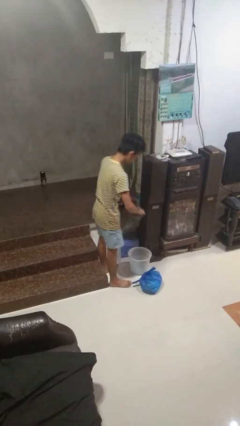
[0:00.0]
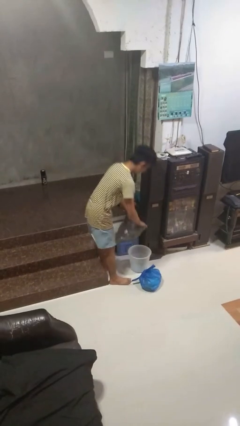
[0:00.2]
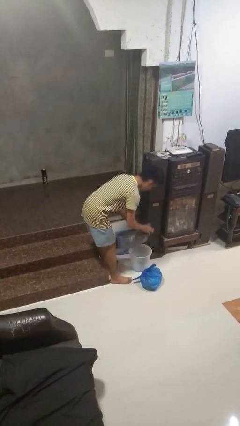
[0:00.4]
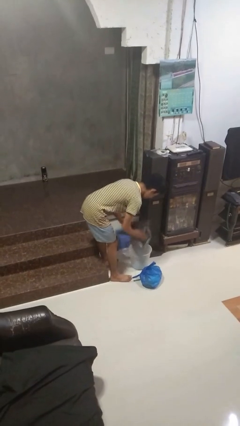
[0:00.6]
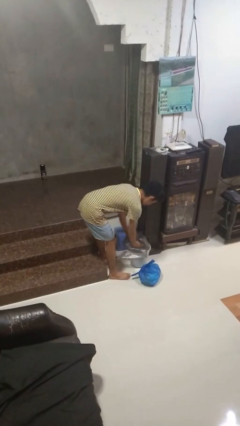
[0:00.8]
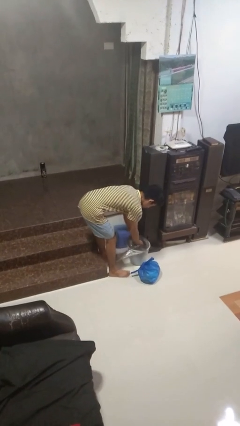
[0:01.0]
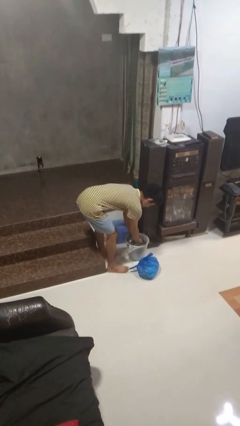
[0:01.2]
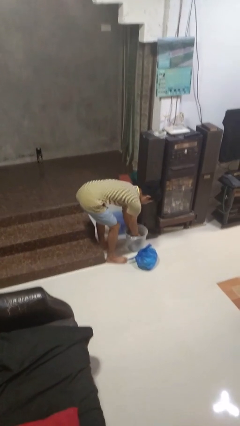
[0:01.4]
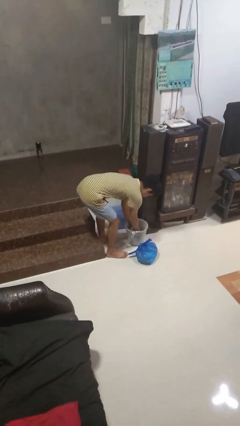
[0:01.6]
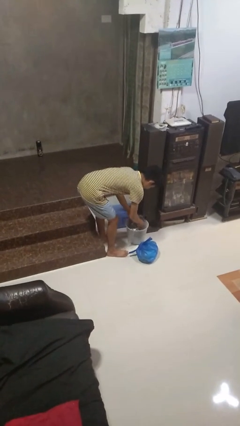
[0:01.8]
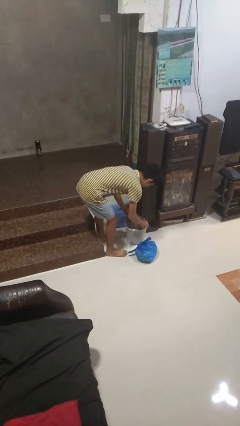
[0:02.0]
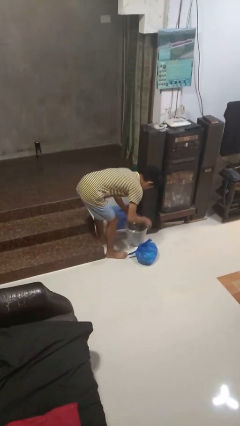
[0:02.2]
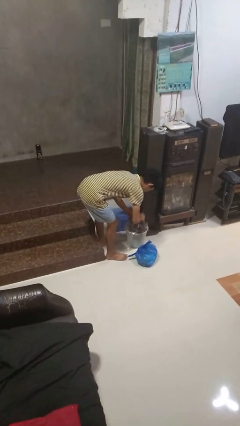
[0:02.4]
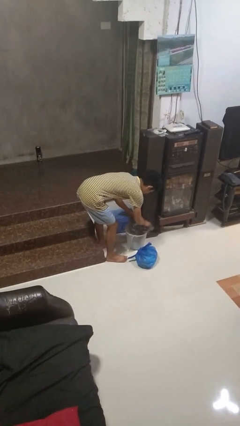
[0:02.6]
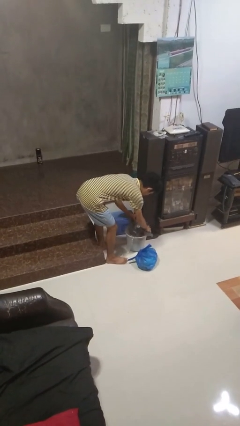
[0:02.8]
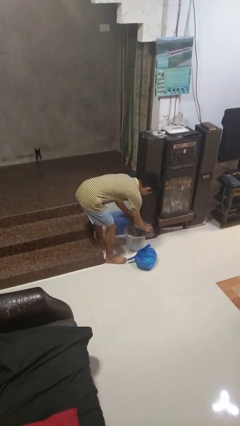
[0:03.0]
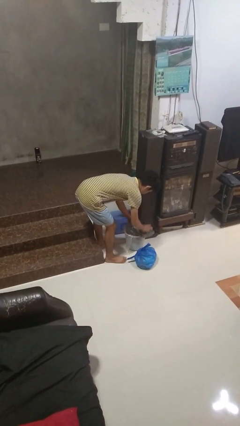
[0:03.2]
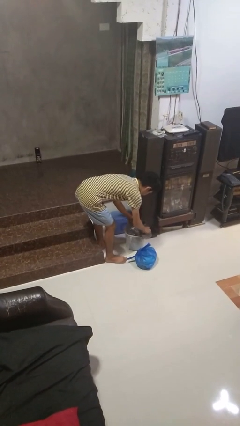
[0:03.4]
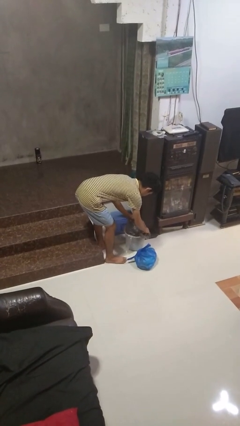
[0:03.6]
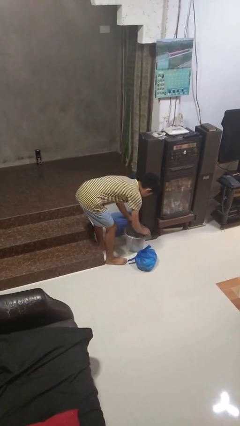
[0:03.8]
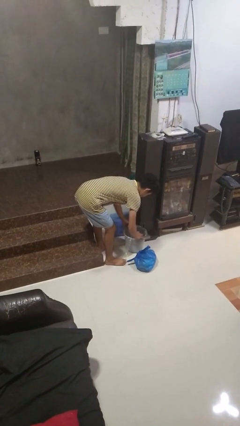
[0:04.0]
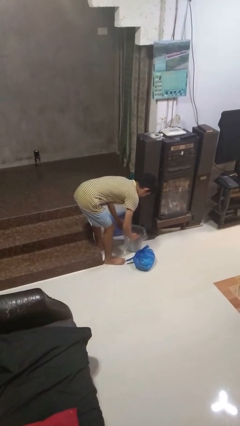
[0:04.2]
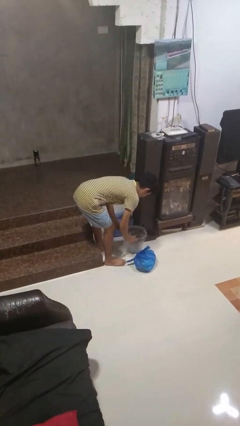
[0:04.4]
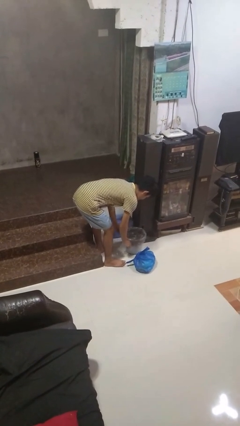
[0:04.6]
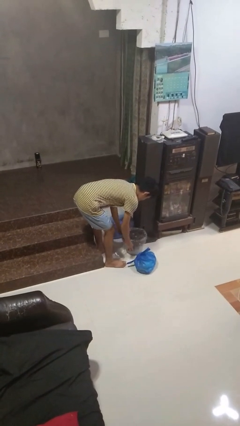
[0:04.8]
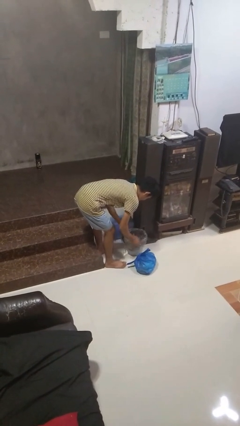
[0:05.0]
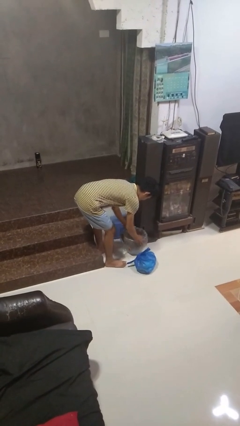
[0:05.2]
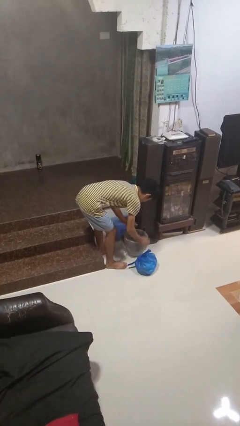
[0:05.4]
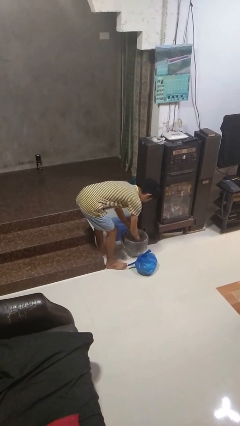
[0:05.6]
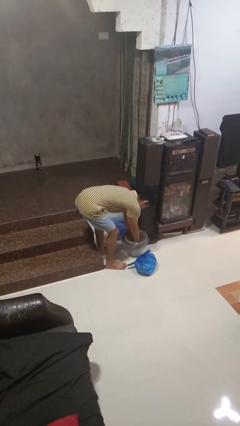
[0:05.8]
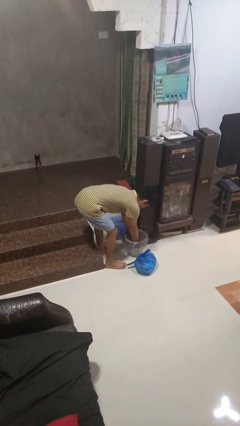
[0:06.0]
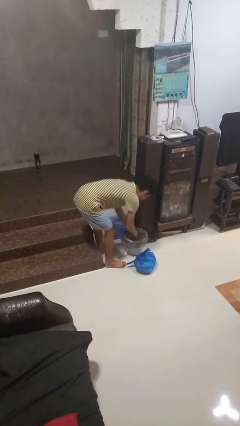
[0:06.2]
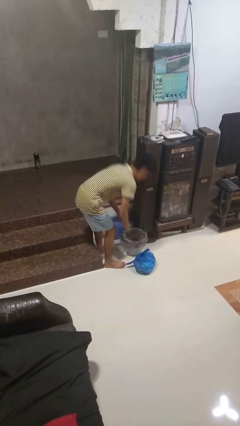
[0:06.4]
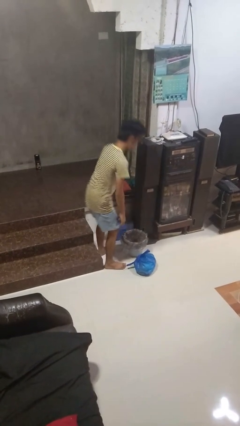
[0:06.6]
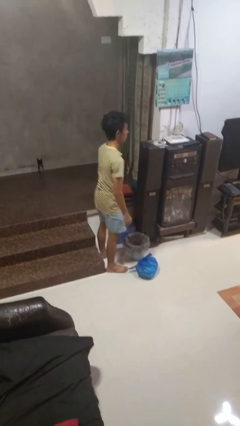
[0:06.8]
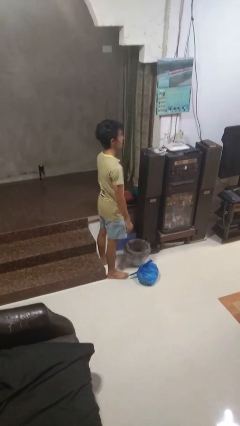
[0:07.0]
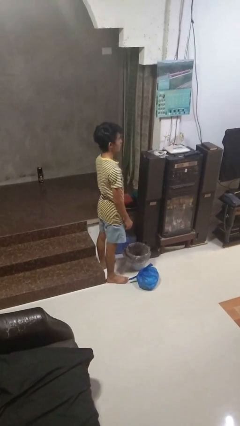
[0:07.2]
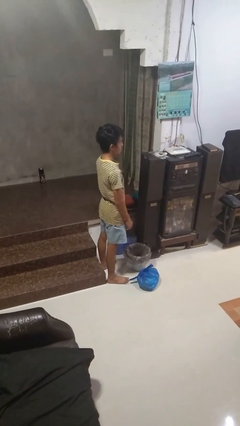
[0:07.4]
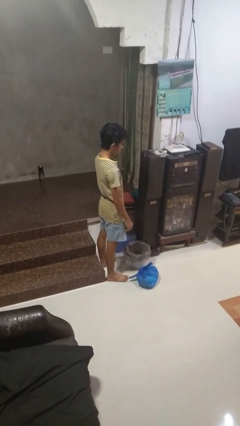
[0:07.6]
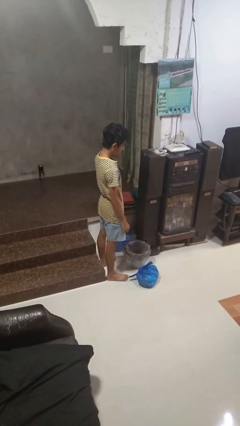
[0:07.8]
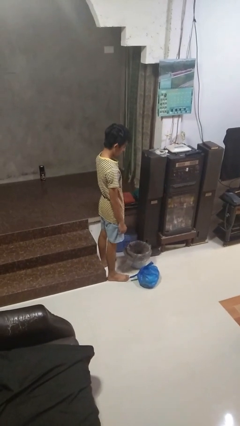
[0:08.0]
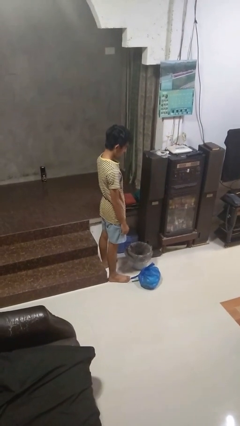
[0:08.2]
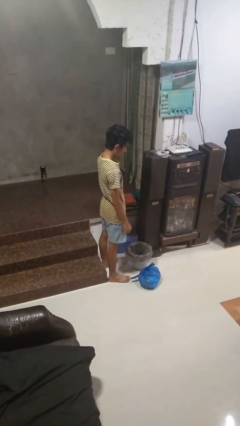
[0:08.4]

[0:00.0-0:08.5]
person inserts trashbag into trashcan

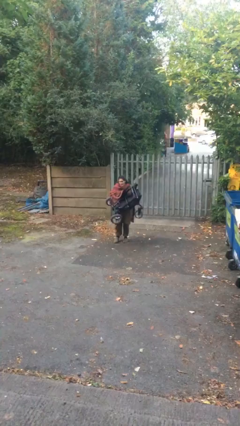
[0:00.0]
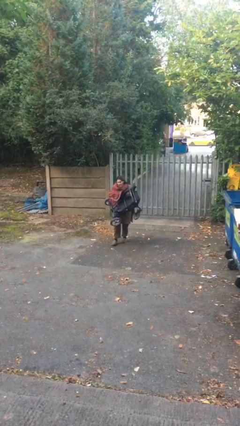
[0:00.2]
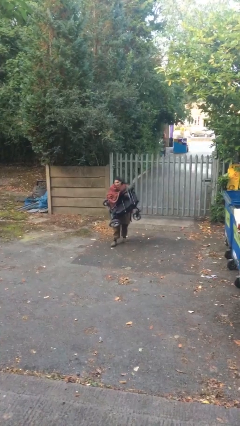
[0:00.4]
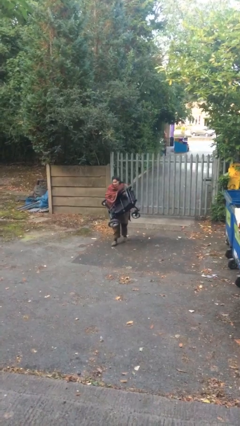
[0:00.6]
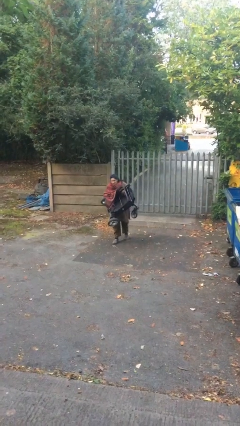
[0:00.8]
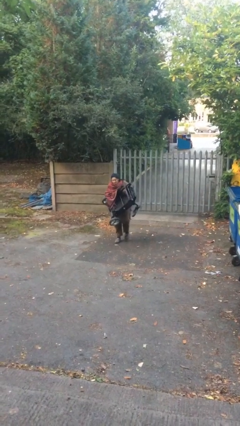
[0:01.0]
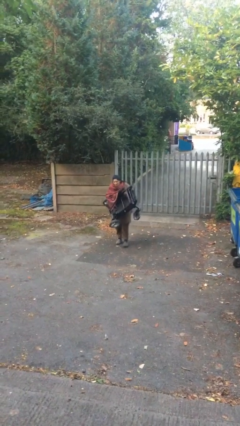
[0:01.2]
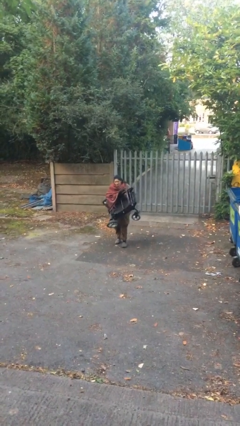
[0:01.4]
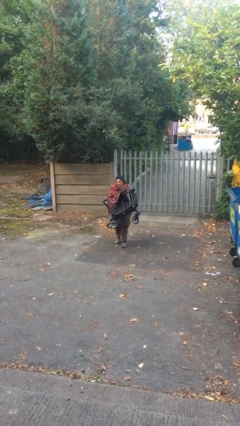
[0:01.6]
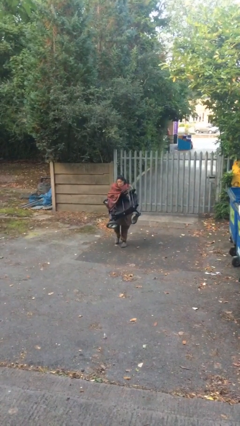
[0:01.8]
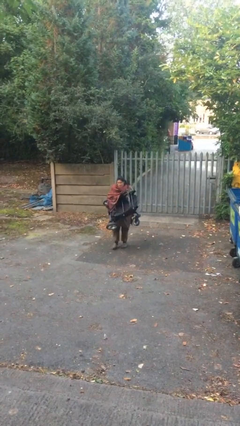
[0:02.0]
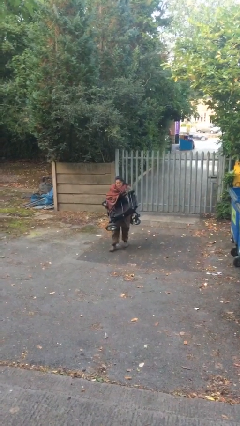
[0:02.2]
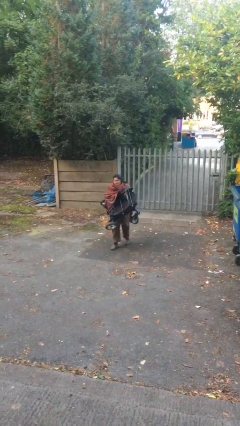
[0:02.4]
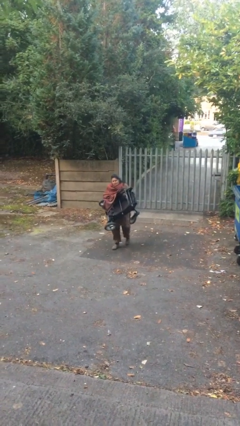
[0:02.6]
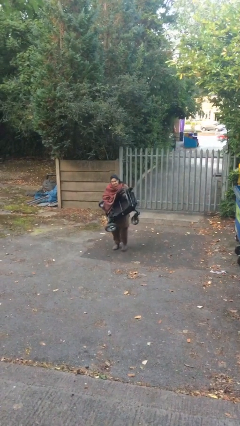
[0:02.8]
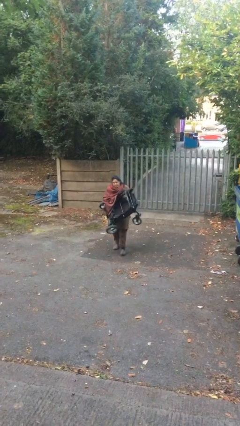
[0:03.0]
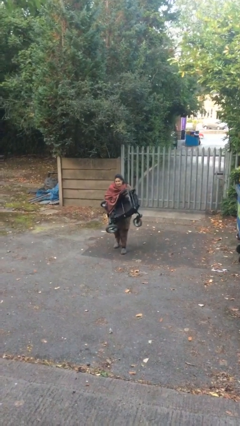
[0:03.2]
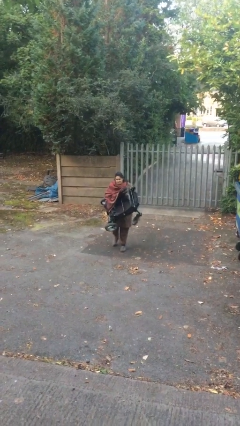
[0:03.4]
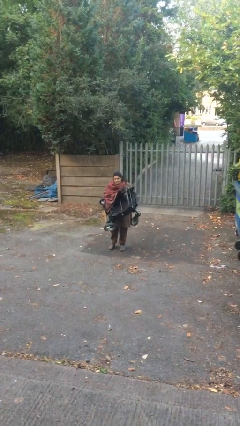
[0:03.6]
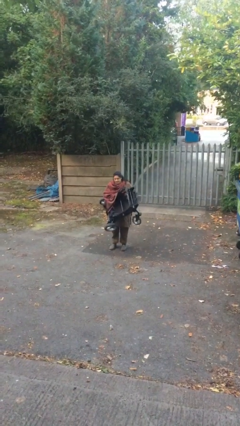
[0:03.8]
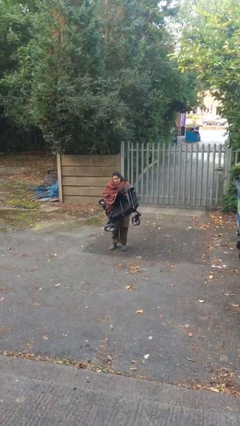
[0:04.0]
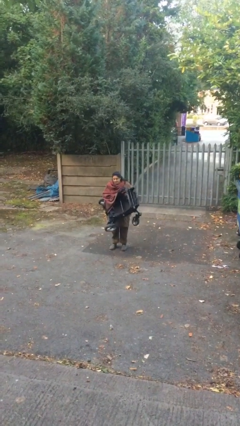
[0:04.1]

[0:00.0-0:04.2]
person carries heavy object

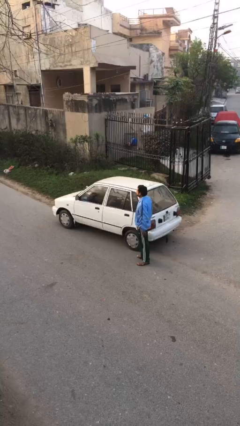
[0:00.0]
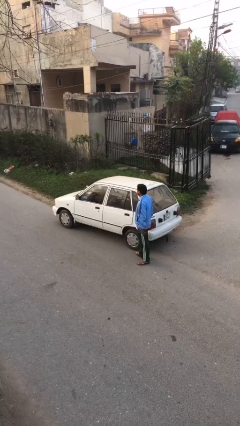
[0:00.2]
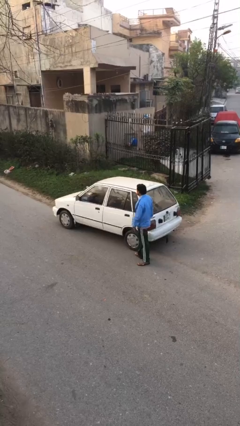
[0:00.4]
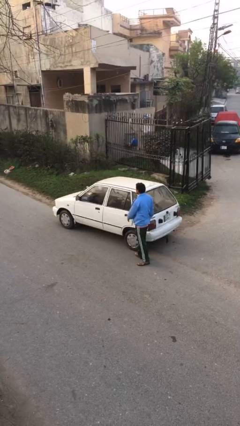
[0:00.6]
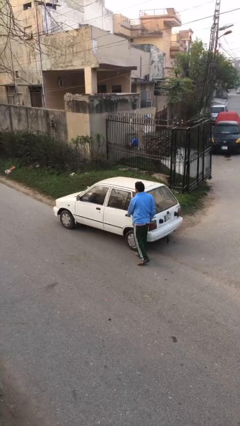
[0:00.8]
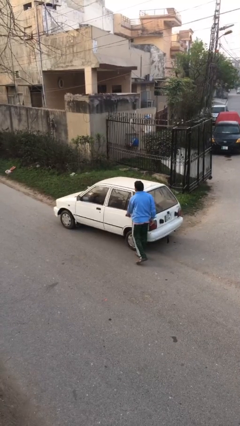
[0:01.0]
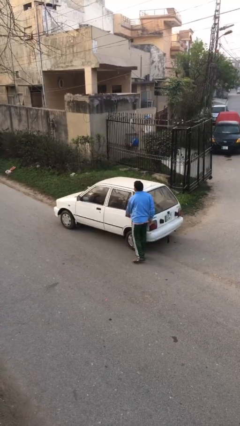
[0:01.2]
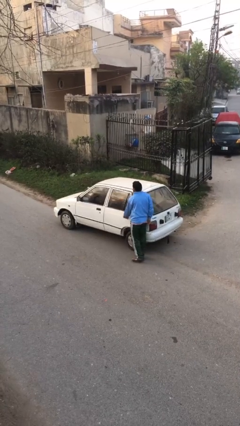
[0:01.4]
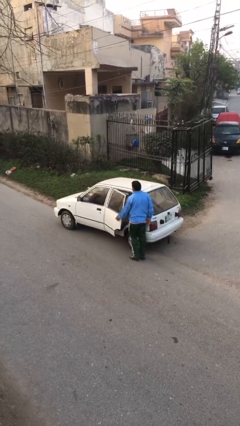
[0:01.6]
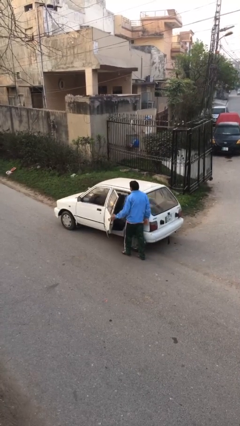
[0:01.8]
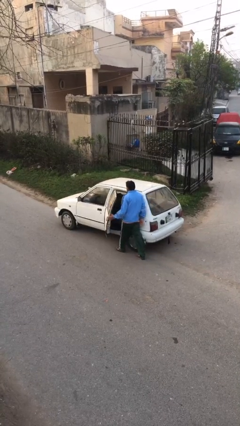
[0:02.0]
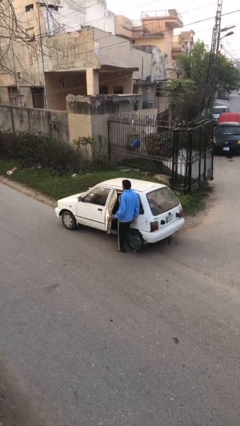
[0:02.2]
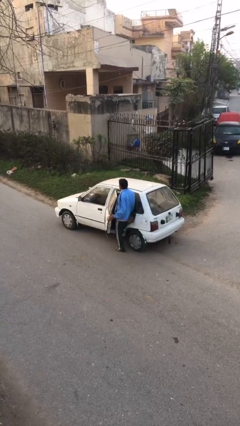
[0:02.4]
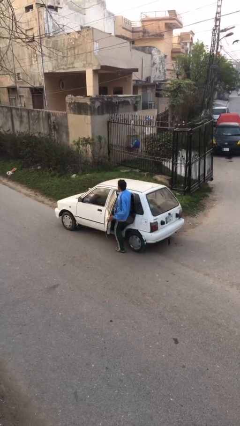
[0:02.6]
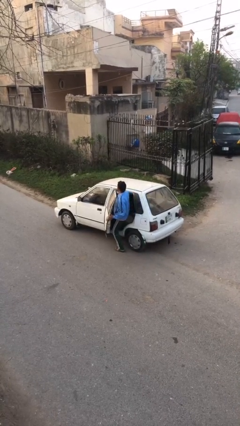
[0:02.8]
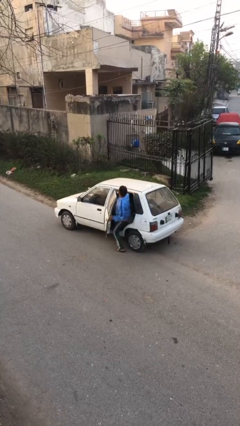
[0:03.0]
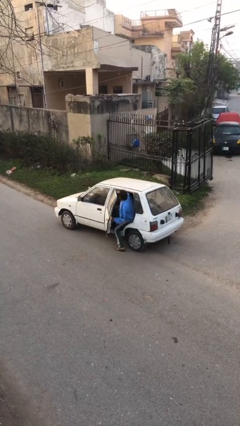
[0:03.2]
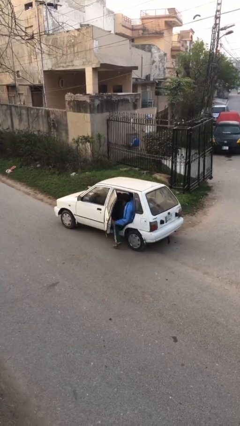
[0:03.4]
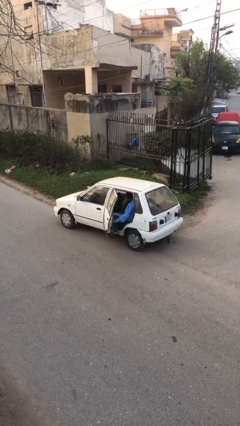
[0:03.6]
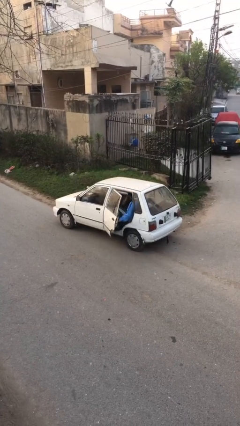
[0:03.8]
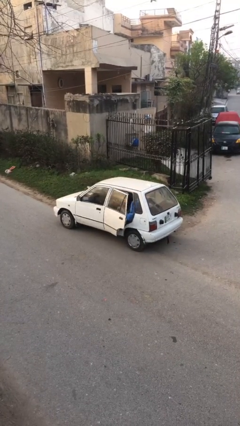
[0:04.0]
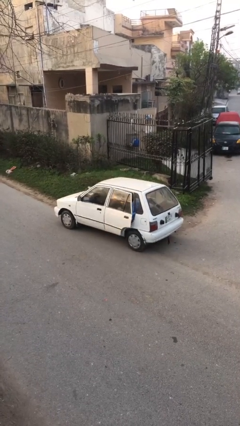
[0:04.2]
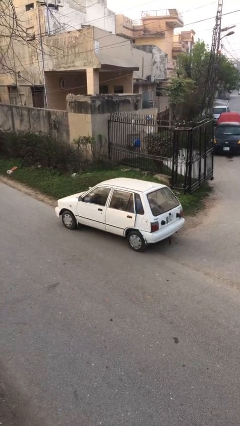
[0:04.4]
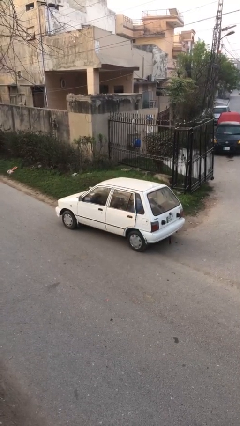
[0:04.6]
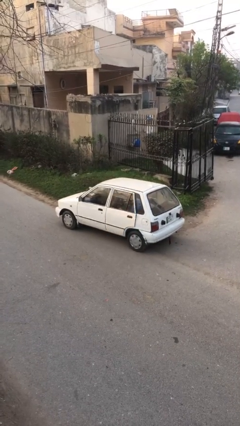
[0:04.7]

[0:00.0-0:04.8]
car picks up person

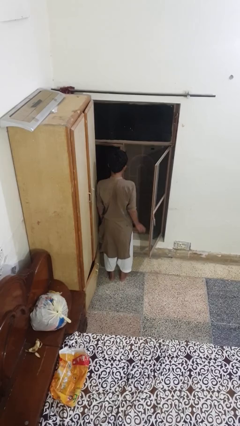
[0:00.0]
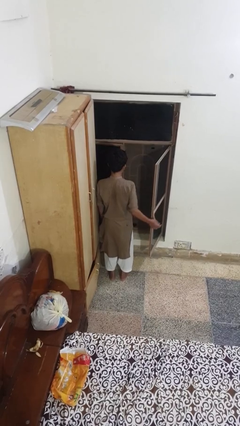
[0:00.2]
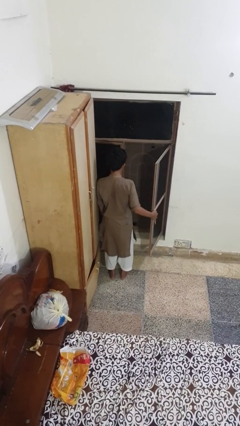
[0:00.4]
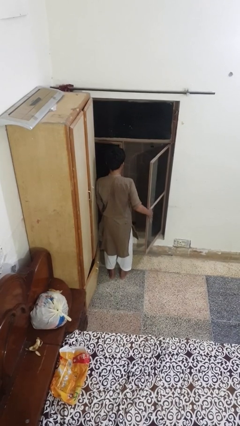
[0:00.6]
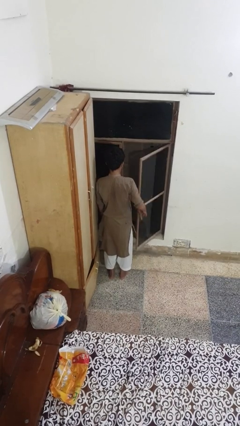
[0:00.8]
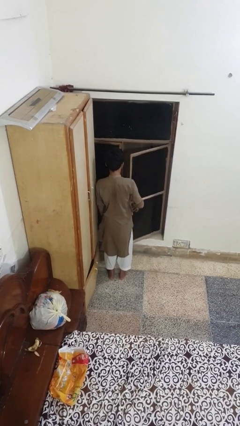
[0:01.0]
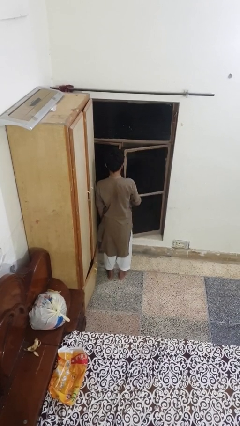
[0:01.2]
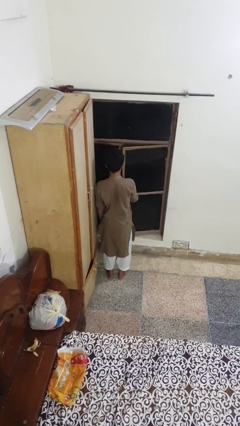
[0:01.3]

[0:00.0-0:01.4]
person closes home window
